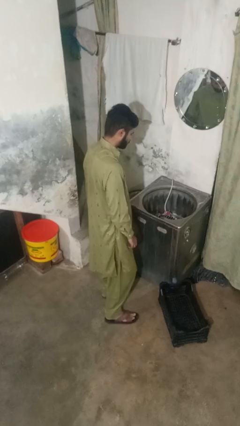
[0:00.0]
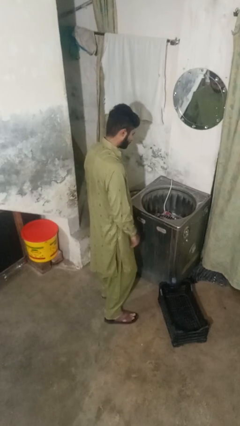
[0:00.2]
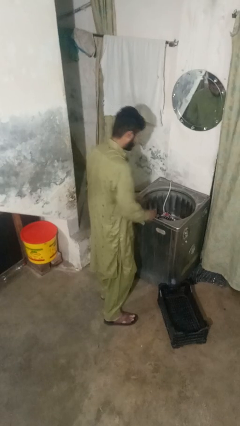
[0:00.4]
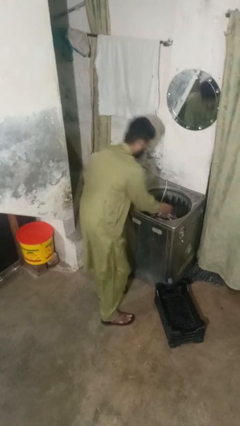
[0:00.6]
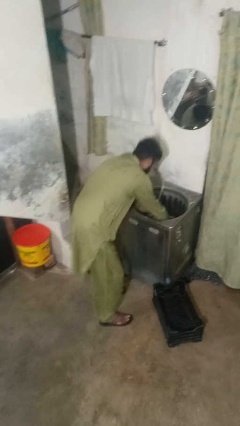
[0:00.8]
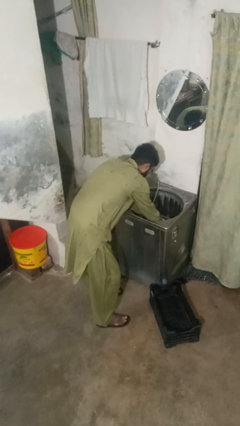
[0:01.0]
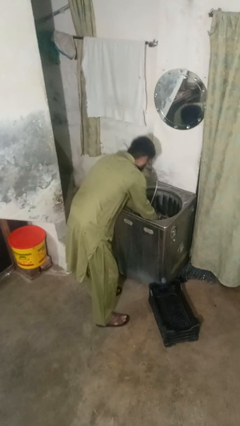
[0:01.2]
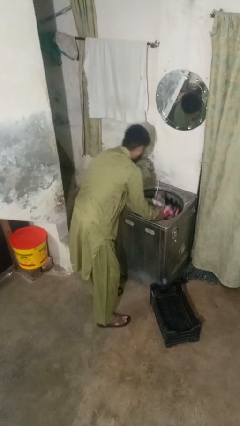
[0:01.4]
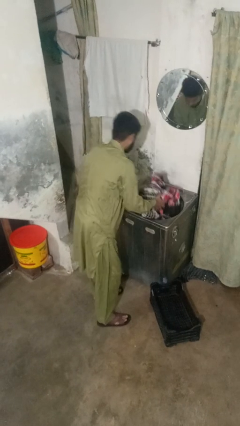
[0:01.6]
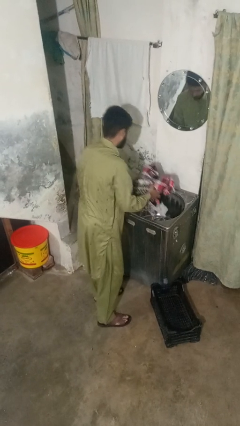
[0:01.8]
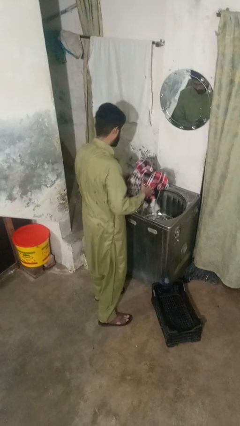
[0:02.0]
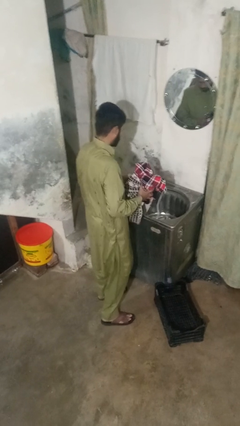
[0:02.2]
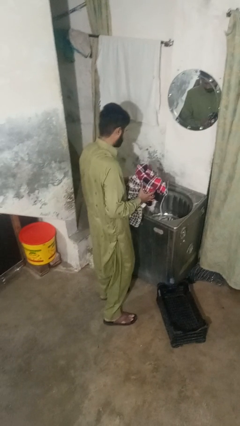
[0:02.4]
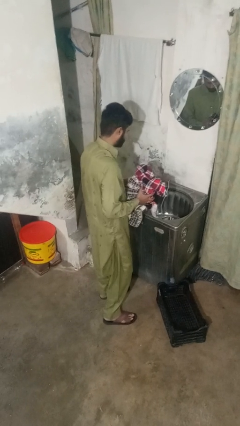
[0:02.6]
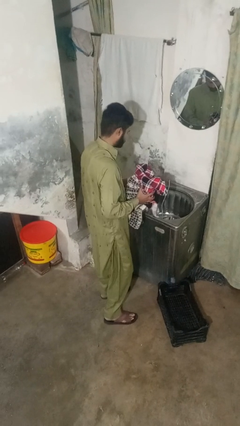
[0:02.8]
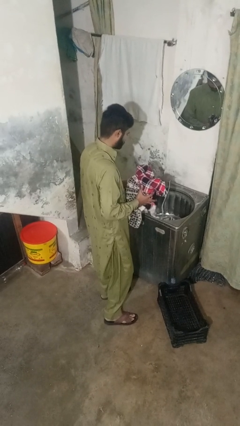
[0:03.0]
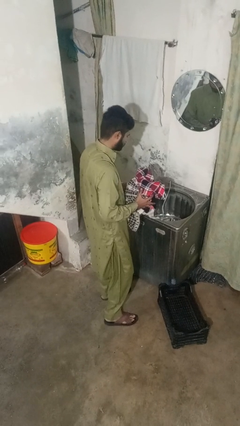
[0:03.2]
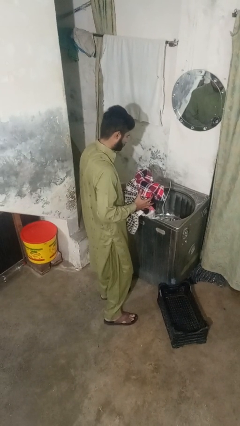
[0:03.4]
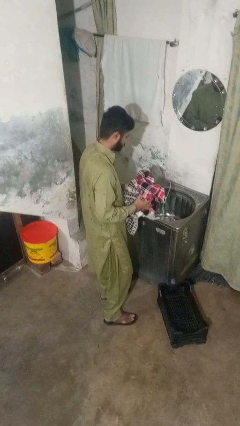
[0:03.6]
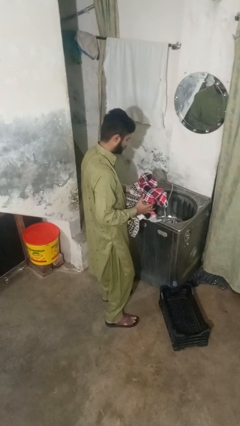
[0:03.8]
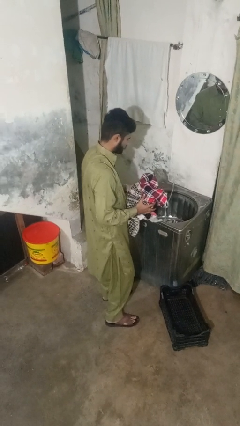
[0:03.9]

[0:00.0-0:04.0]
person unloads clotheswasher

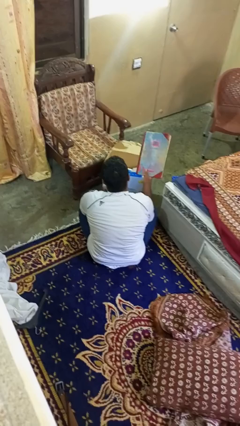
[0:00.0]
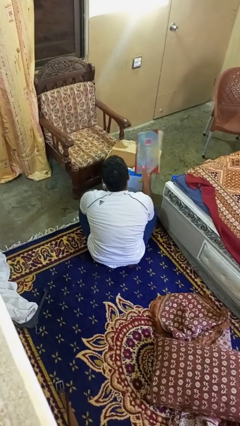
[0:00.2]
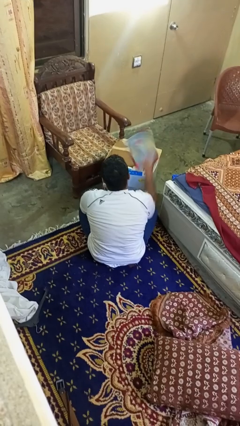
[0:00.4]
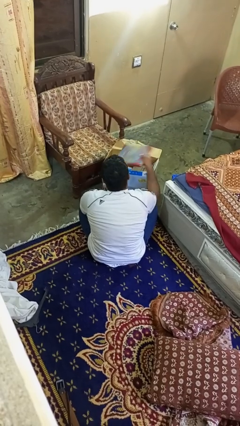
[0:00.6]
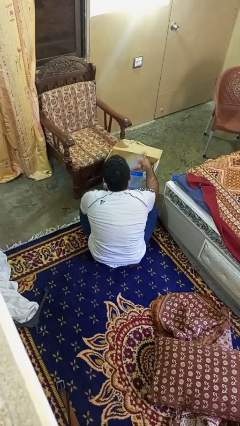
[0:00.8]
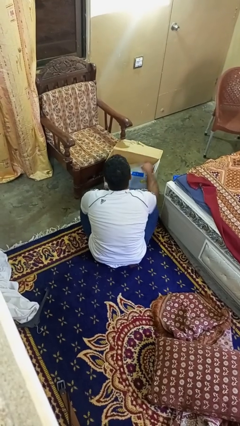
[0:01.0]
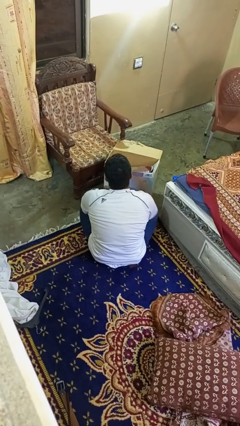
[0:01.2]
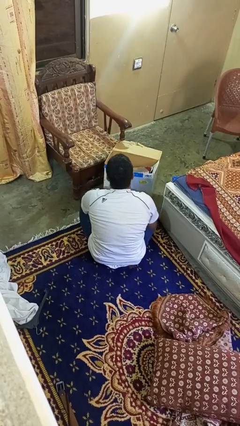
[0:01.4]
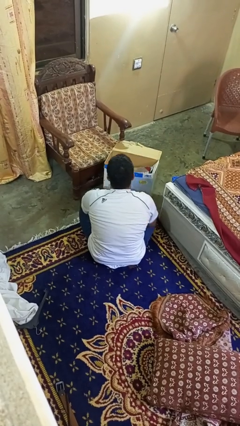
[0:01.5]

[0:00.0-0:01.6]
person puts object into box

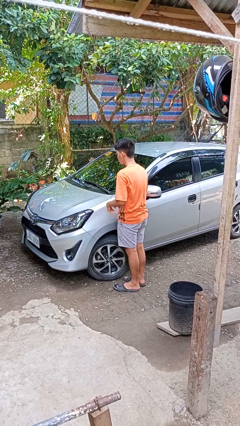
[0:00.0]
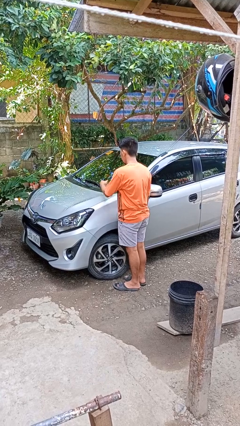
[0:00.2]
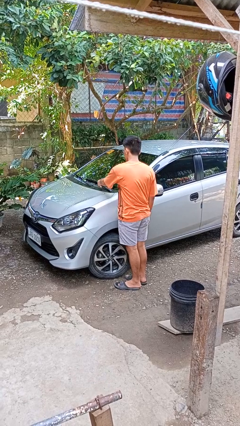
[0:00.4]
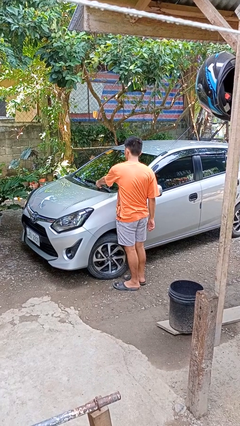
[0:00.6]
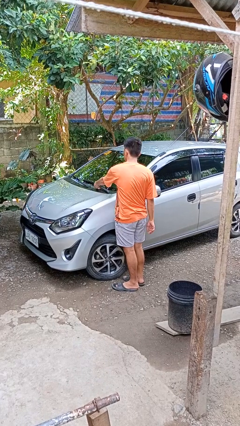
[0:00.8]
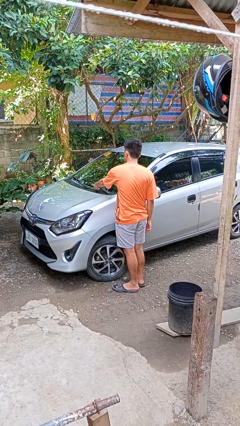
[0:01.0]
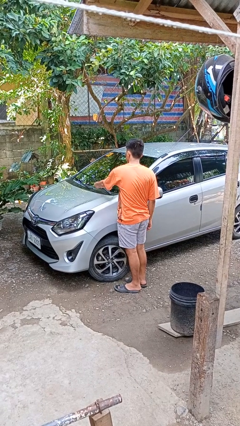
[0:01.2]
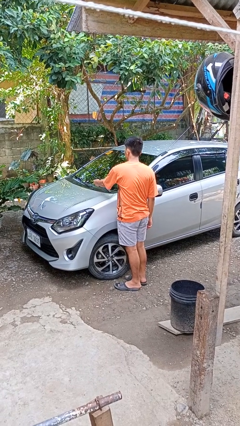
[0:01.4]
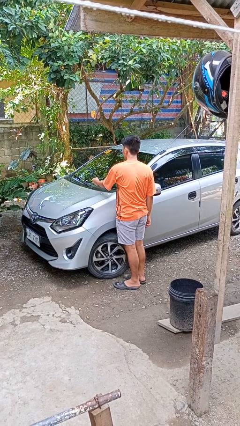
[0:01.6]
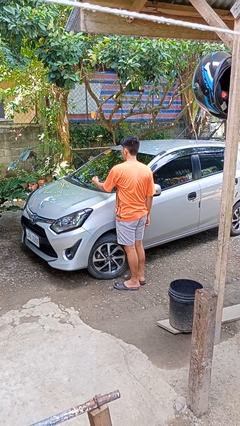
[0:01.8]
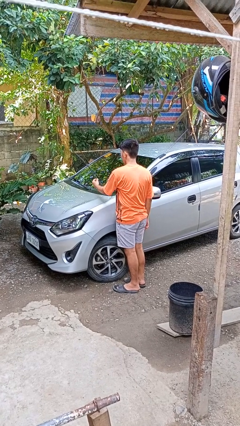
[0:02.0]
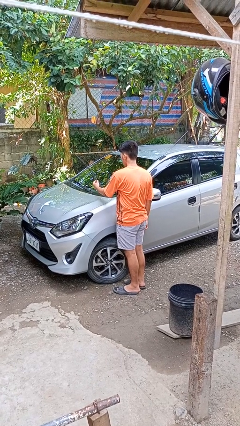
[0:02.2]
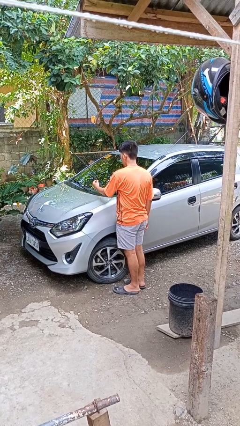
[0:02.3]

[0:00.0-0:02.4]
person flips up car wipers

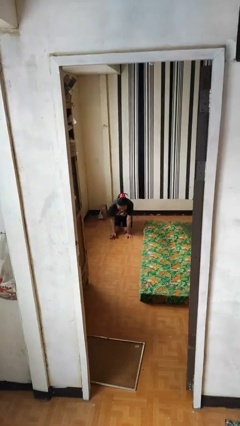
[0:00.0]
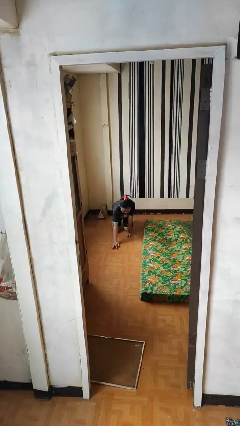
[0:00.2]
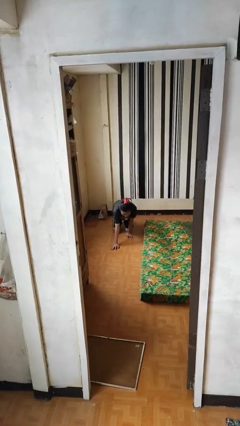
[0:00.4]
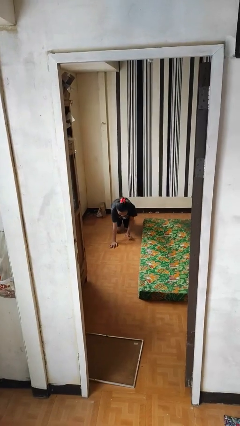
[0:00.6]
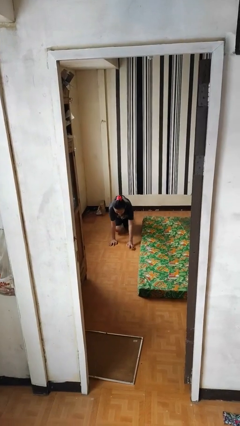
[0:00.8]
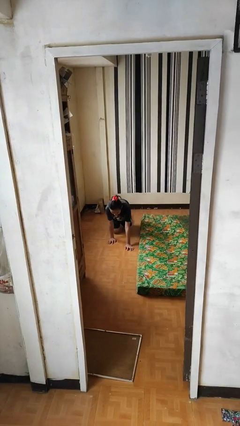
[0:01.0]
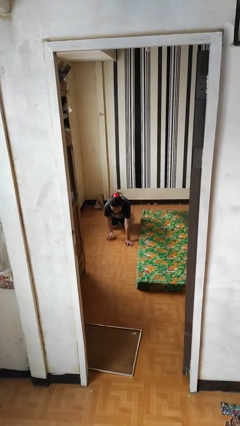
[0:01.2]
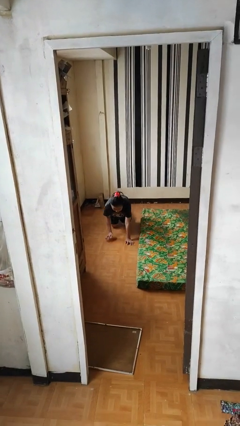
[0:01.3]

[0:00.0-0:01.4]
person crawls

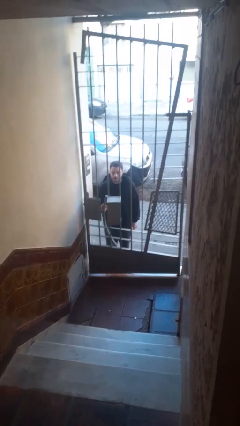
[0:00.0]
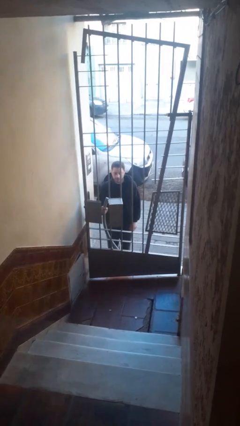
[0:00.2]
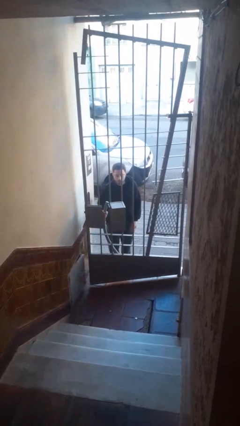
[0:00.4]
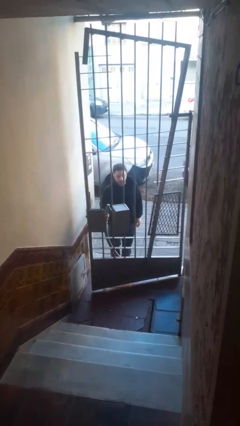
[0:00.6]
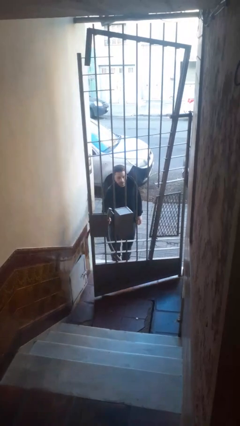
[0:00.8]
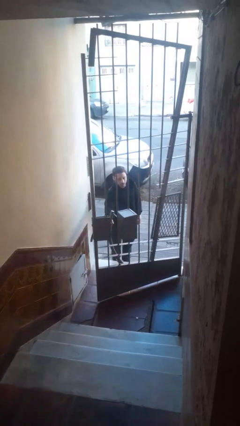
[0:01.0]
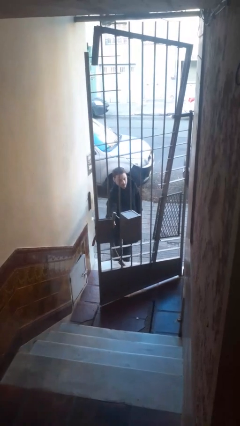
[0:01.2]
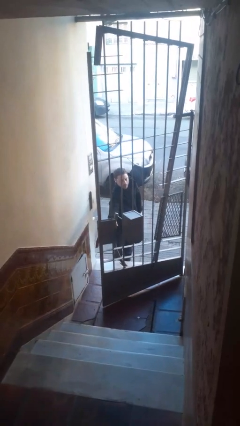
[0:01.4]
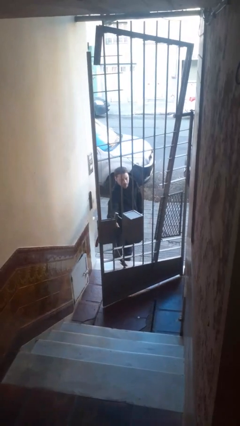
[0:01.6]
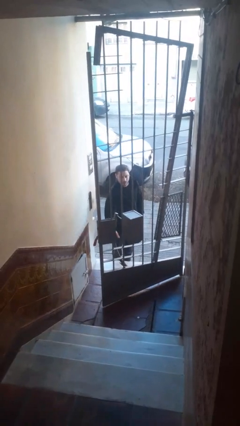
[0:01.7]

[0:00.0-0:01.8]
person opens gate

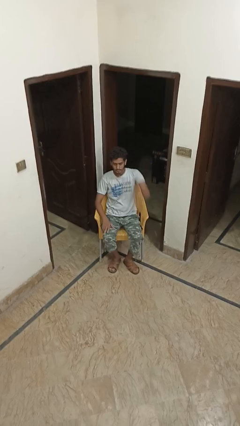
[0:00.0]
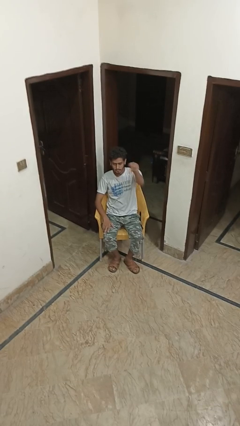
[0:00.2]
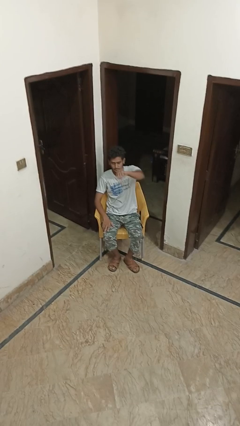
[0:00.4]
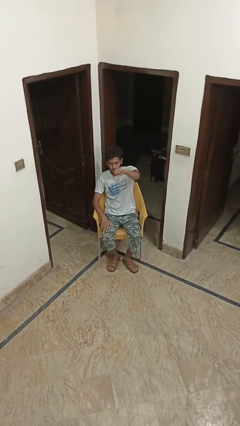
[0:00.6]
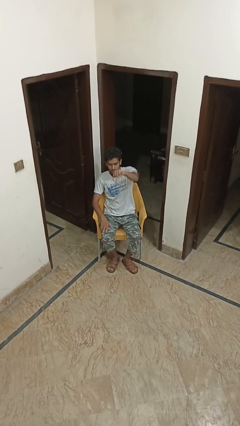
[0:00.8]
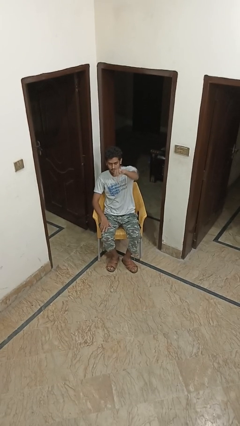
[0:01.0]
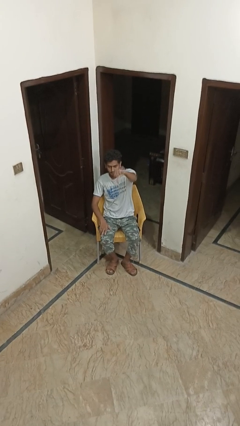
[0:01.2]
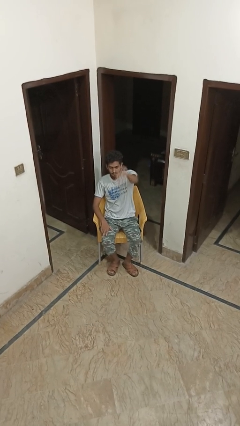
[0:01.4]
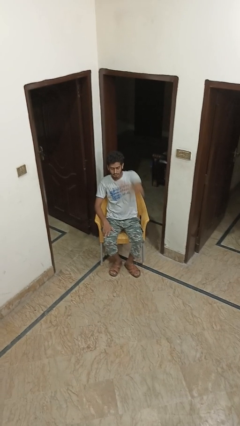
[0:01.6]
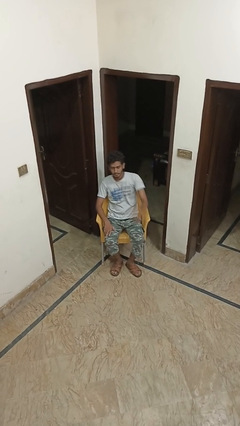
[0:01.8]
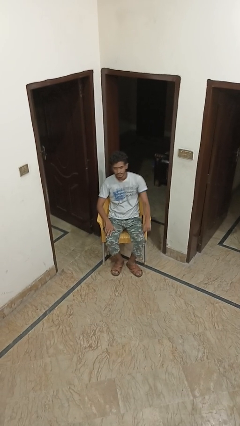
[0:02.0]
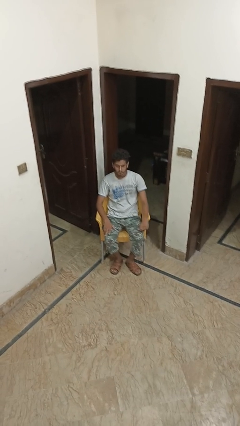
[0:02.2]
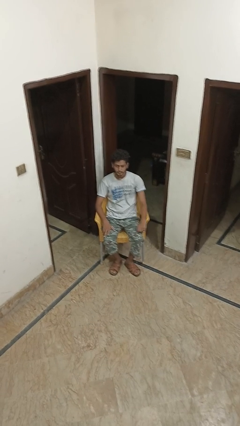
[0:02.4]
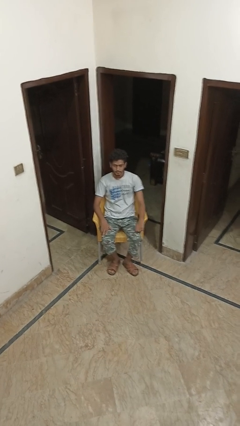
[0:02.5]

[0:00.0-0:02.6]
person gestures thumbs down

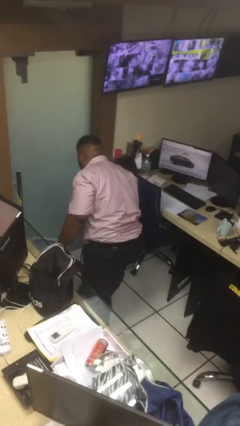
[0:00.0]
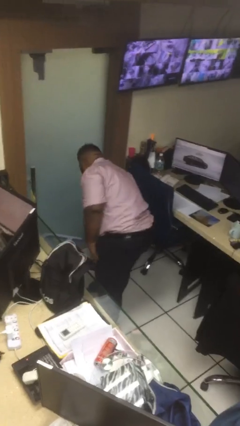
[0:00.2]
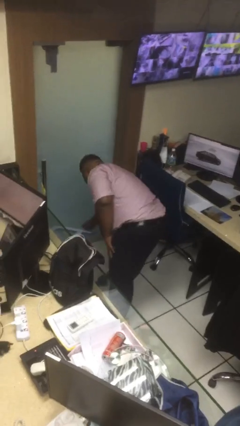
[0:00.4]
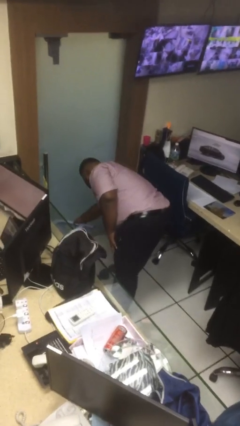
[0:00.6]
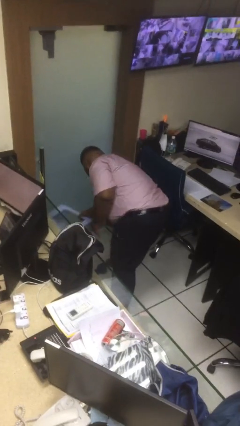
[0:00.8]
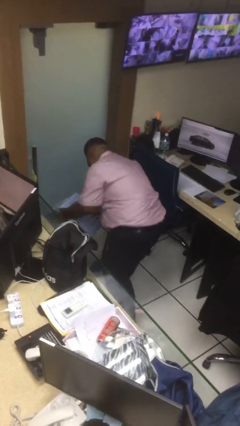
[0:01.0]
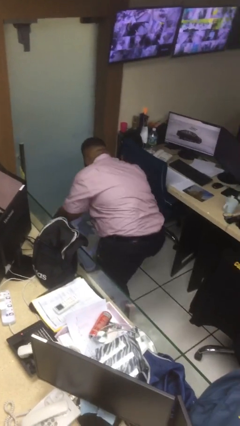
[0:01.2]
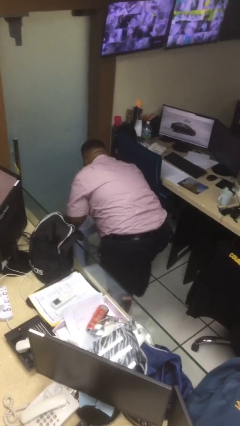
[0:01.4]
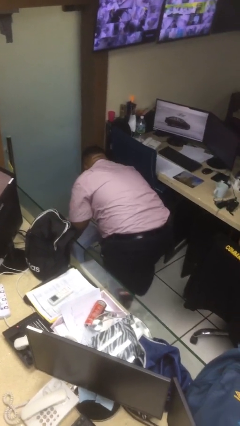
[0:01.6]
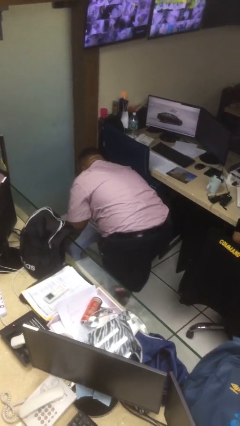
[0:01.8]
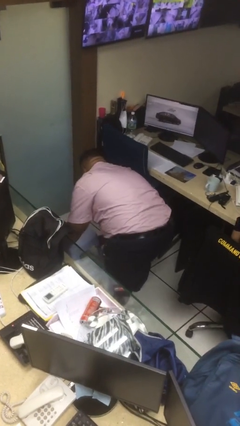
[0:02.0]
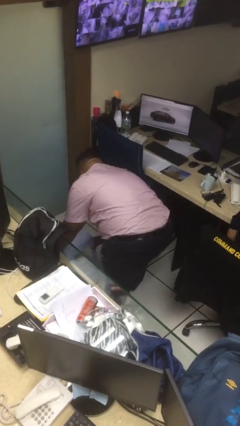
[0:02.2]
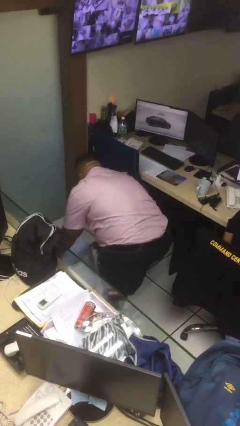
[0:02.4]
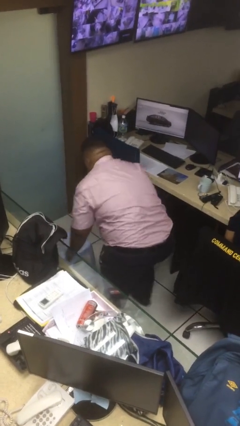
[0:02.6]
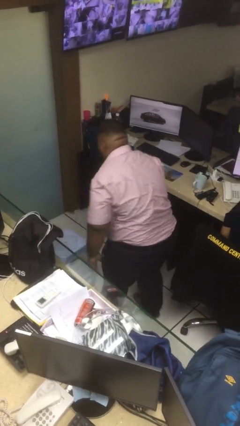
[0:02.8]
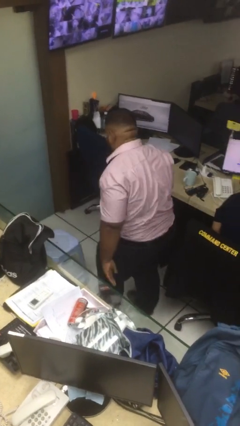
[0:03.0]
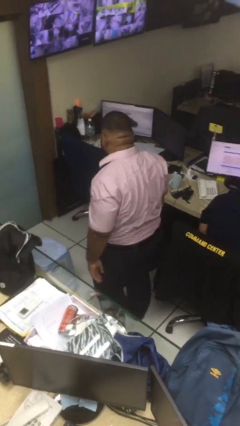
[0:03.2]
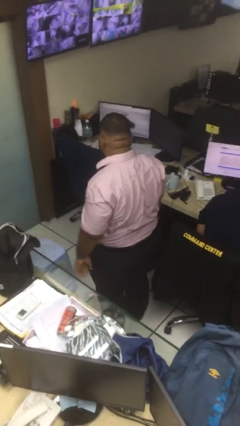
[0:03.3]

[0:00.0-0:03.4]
person sets upright furniture
